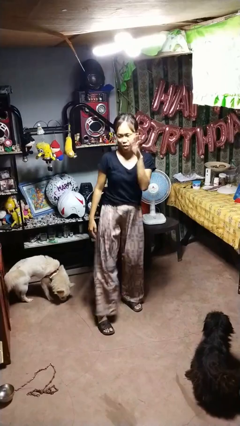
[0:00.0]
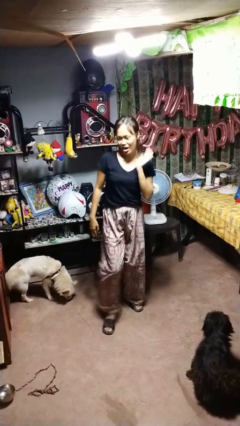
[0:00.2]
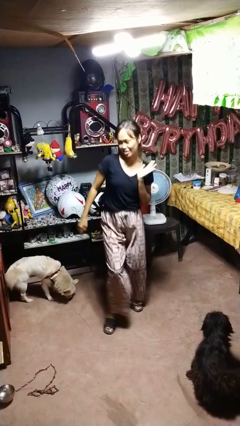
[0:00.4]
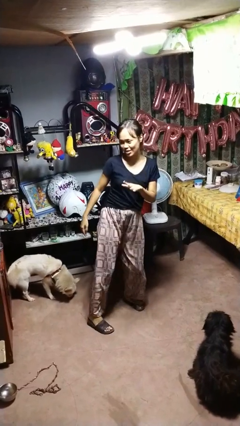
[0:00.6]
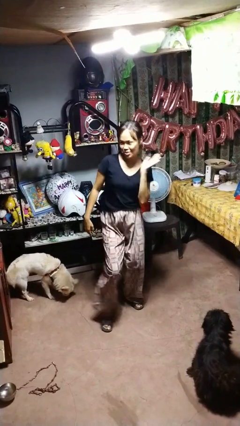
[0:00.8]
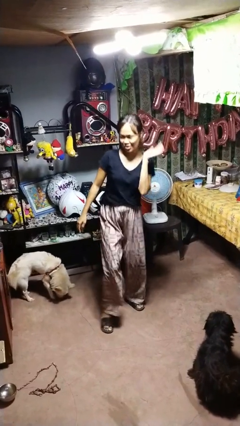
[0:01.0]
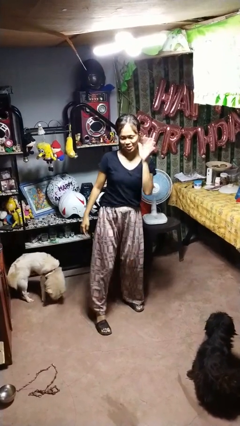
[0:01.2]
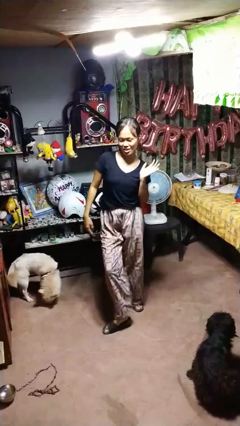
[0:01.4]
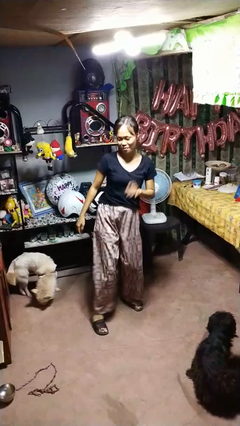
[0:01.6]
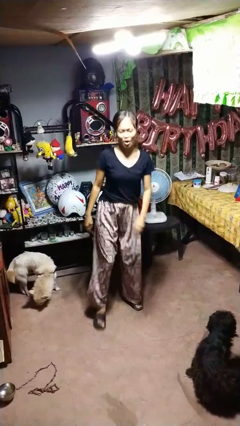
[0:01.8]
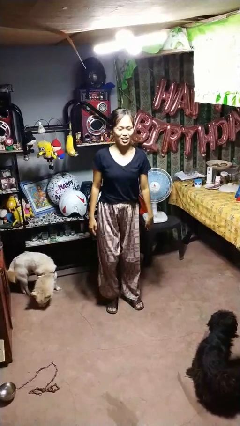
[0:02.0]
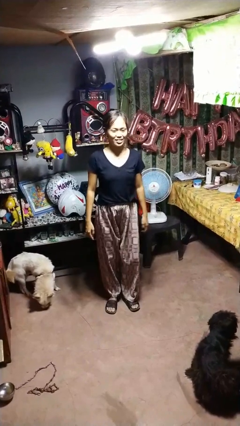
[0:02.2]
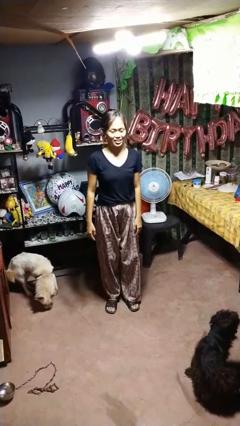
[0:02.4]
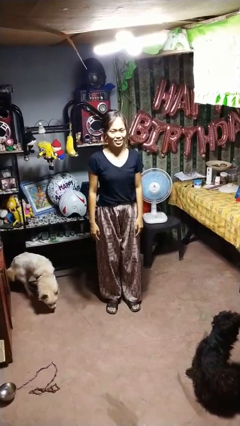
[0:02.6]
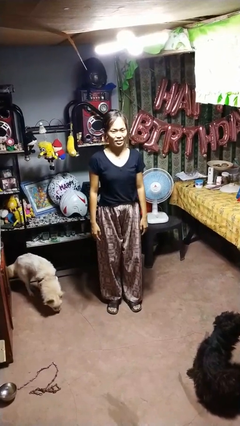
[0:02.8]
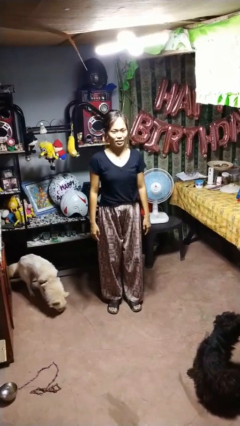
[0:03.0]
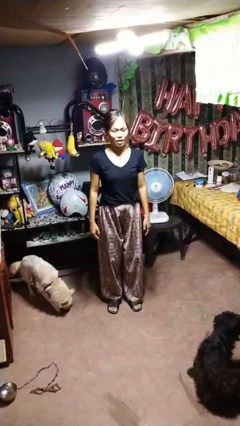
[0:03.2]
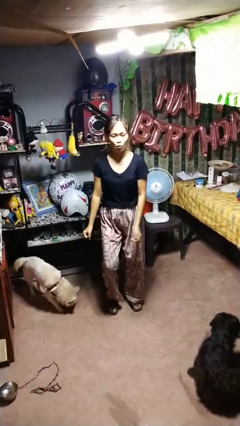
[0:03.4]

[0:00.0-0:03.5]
person dances in place

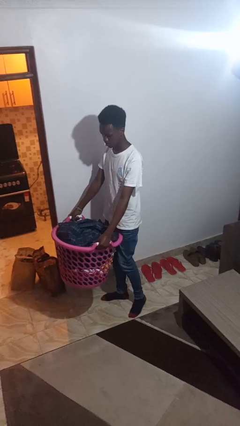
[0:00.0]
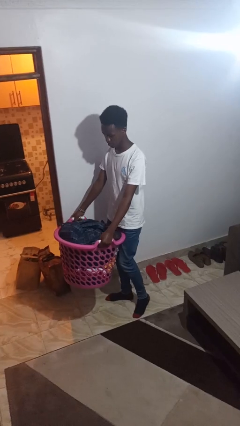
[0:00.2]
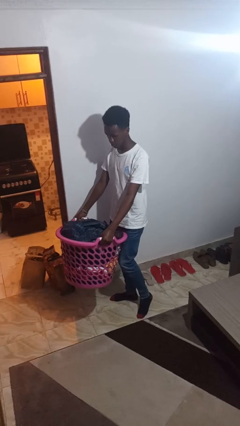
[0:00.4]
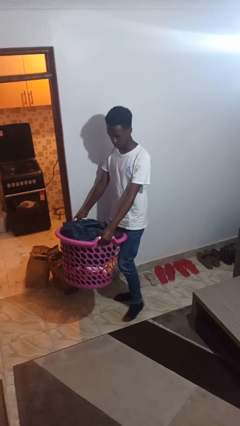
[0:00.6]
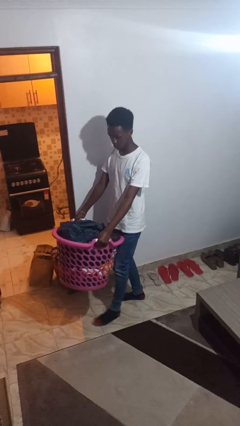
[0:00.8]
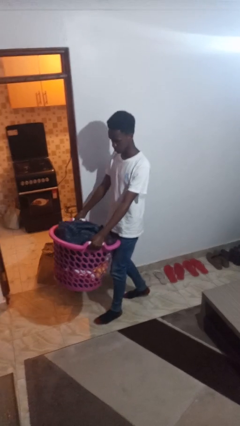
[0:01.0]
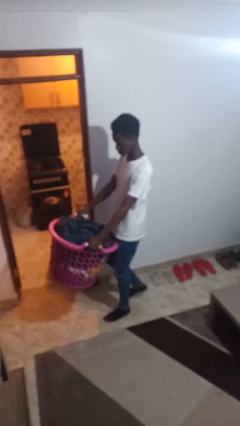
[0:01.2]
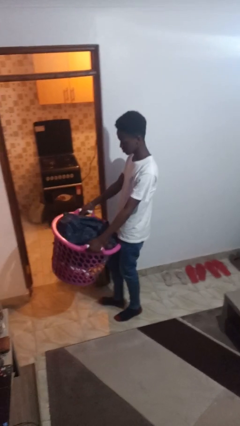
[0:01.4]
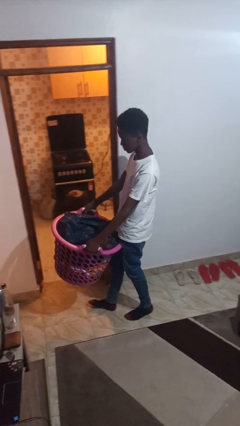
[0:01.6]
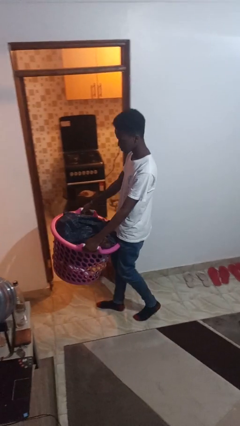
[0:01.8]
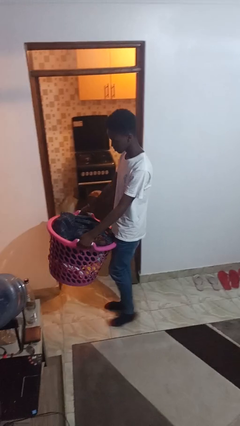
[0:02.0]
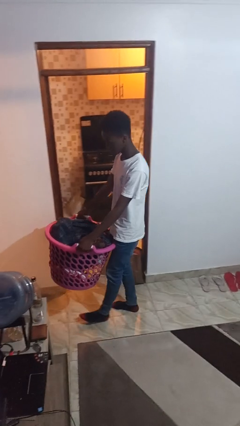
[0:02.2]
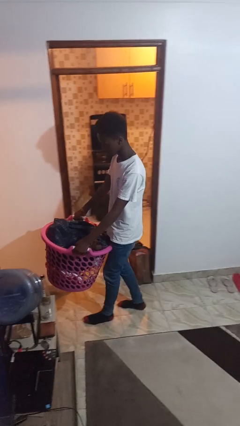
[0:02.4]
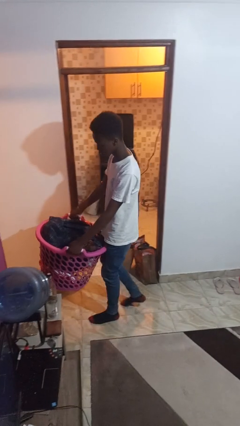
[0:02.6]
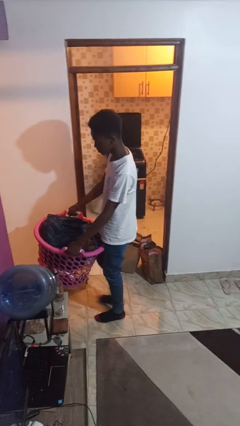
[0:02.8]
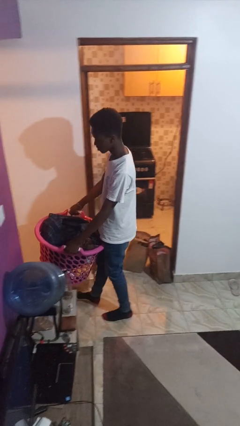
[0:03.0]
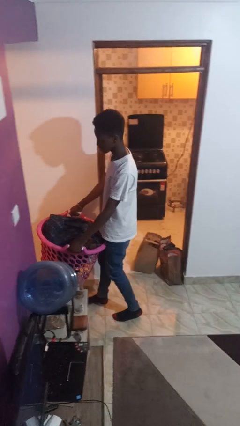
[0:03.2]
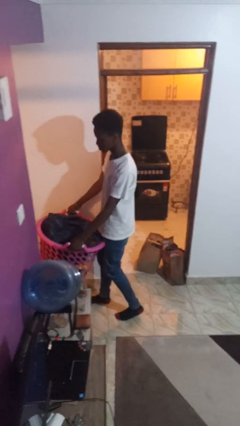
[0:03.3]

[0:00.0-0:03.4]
person carries laundry basket

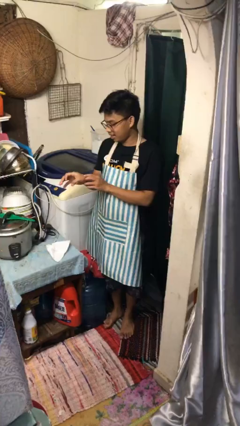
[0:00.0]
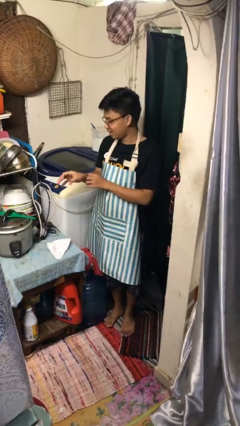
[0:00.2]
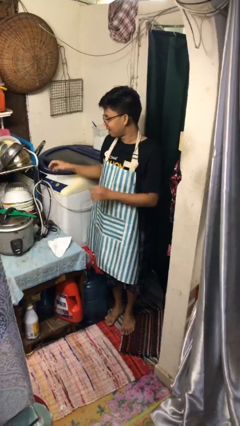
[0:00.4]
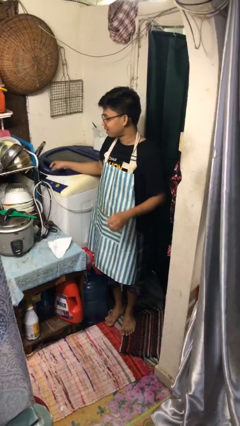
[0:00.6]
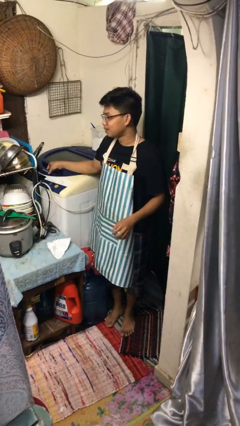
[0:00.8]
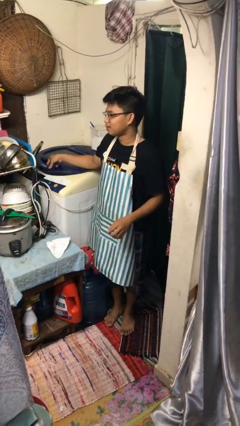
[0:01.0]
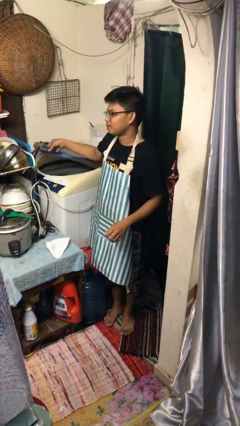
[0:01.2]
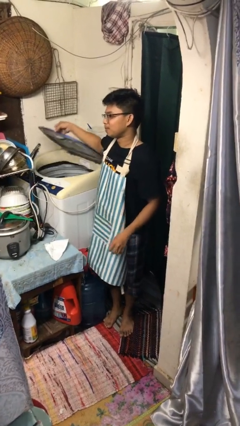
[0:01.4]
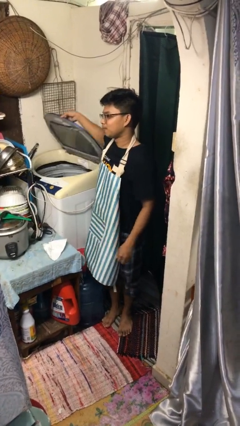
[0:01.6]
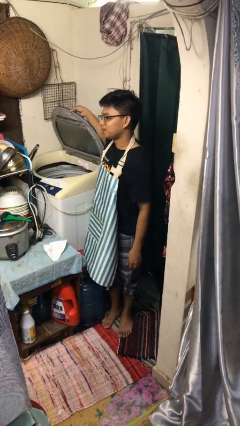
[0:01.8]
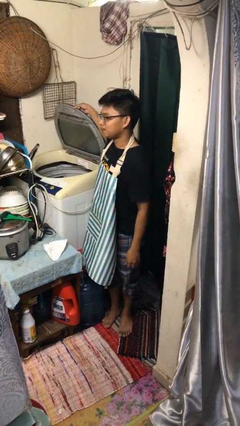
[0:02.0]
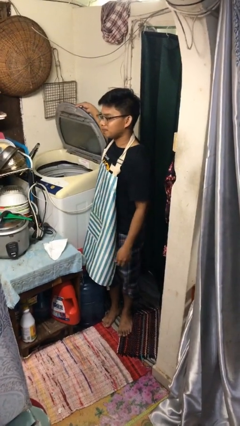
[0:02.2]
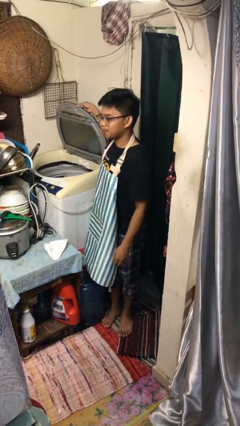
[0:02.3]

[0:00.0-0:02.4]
person opens clothes washer

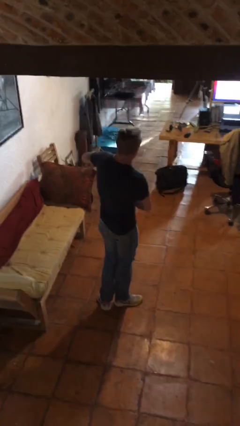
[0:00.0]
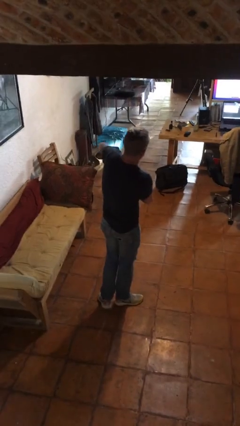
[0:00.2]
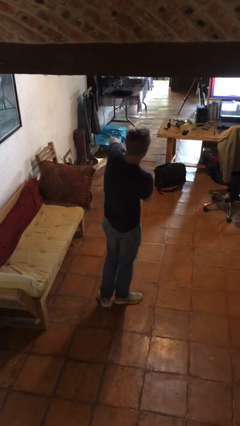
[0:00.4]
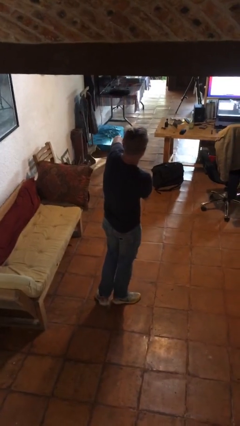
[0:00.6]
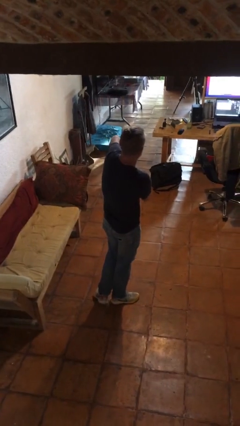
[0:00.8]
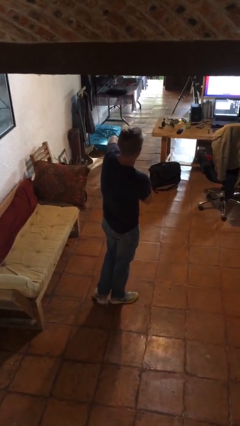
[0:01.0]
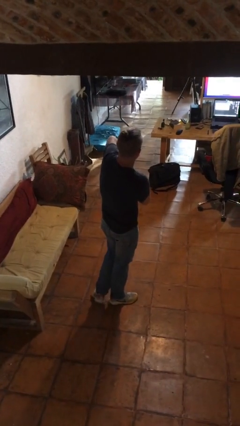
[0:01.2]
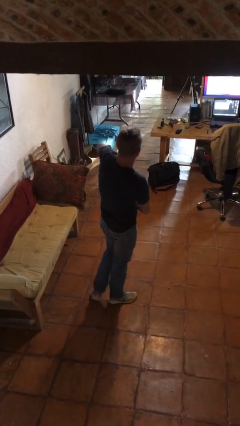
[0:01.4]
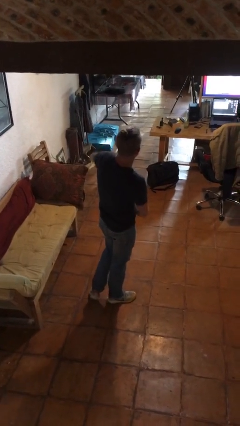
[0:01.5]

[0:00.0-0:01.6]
person applies deodorant

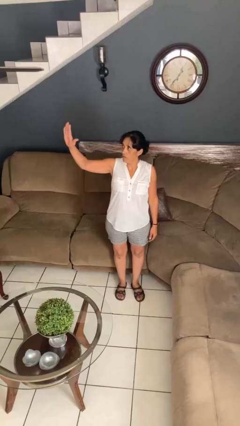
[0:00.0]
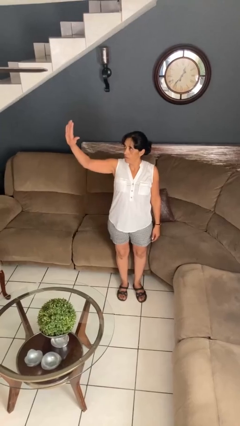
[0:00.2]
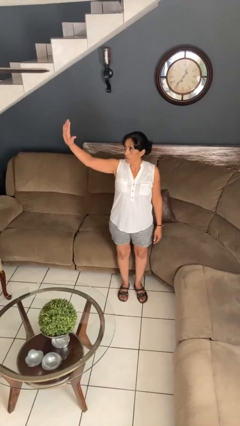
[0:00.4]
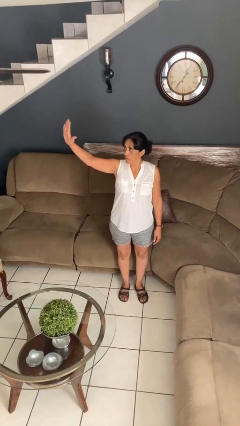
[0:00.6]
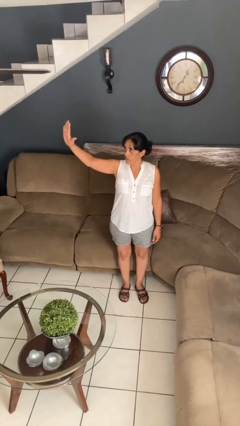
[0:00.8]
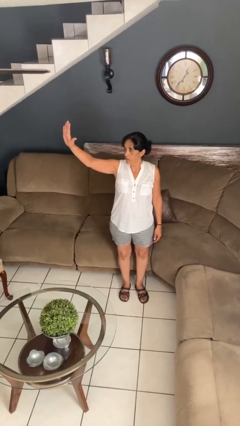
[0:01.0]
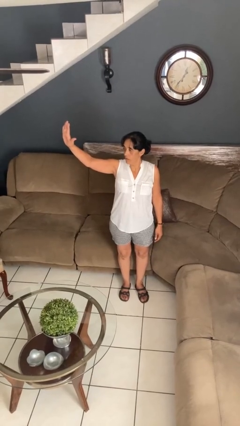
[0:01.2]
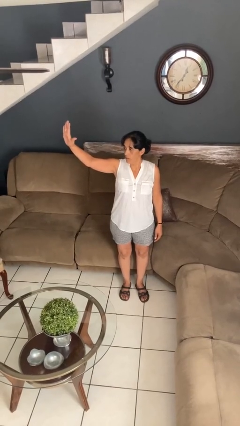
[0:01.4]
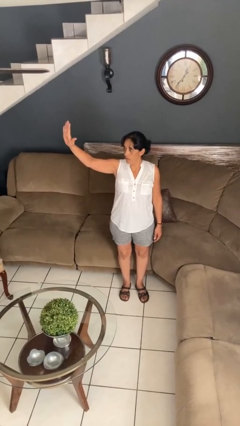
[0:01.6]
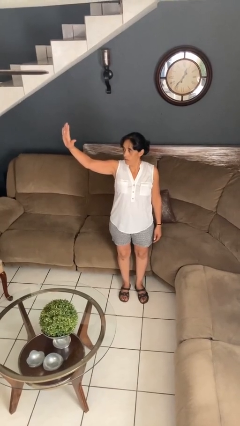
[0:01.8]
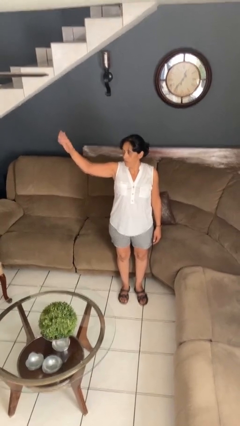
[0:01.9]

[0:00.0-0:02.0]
person gestures stop

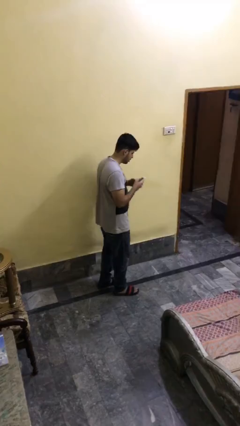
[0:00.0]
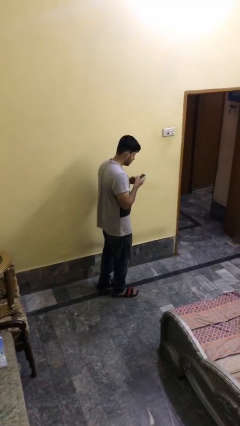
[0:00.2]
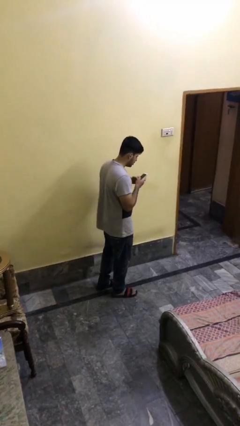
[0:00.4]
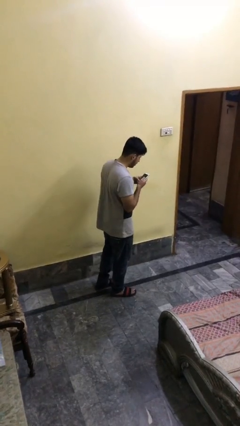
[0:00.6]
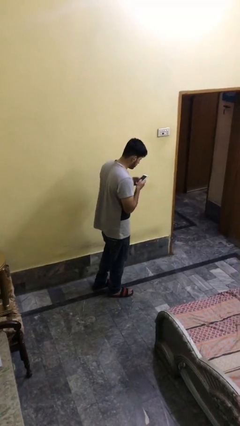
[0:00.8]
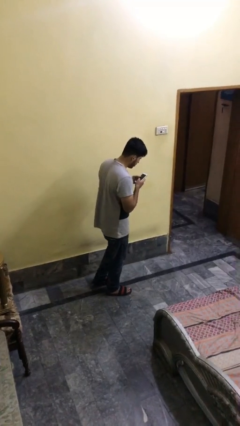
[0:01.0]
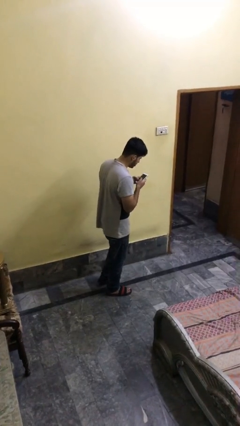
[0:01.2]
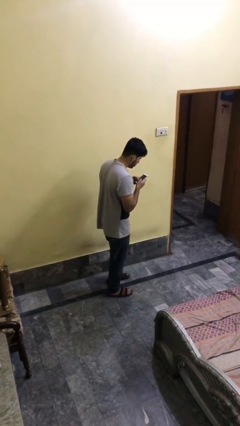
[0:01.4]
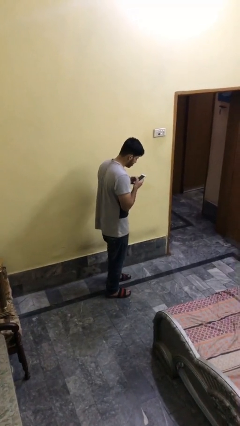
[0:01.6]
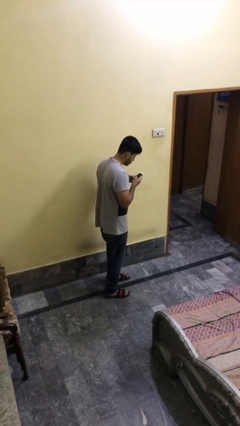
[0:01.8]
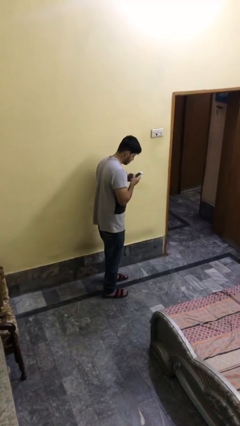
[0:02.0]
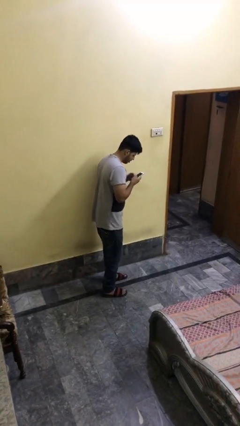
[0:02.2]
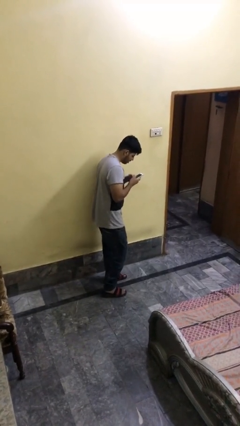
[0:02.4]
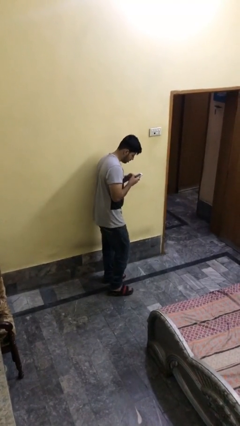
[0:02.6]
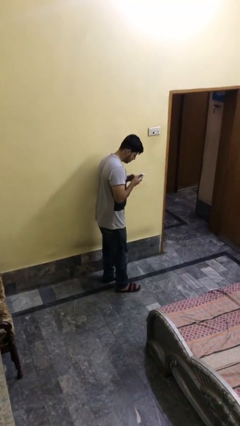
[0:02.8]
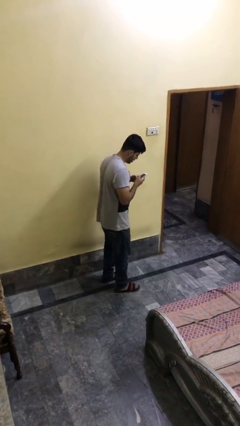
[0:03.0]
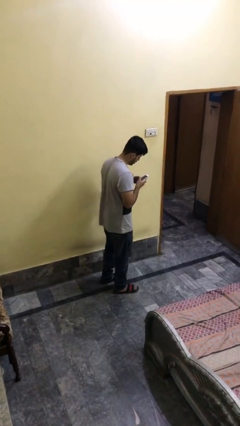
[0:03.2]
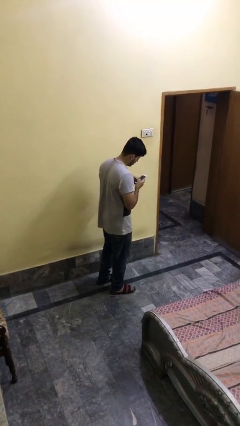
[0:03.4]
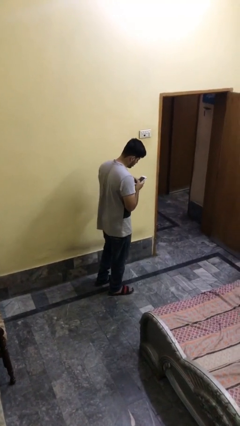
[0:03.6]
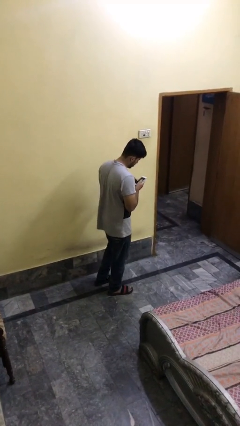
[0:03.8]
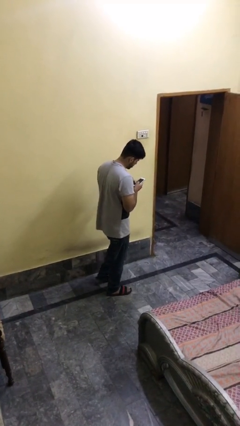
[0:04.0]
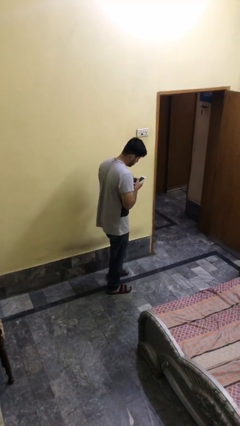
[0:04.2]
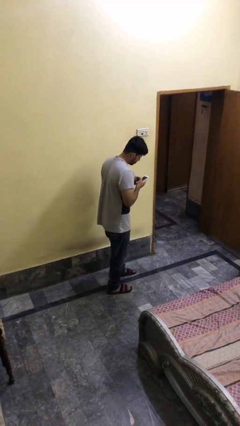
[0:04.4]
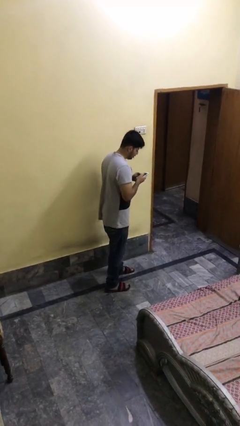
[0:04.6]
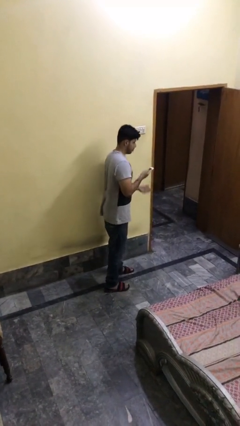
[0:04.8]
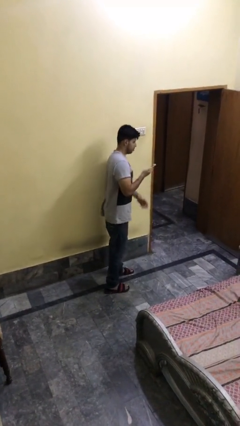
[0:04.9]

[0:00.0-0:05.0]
person texts on phone
